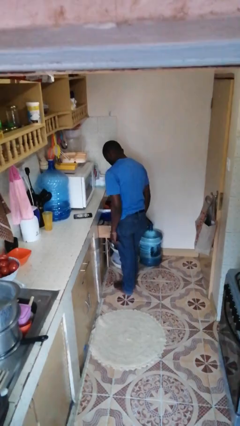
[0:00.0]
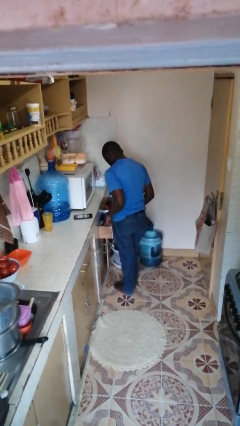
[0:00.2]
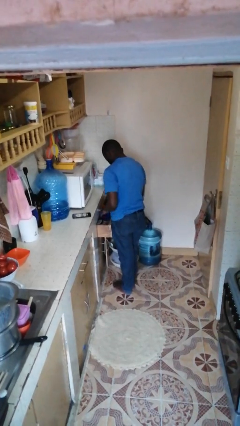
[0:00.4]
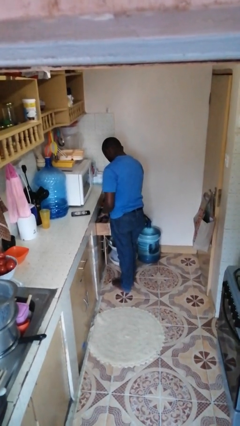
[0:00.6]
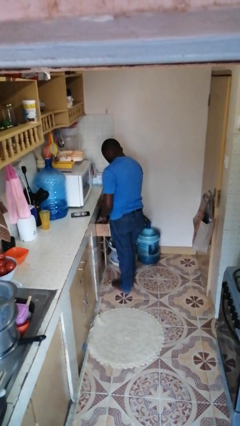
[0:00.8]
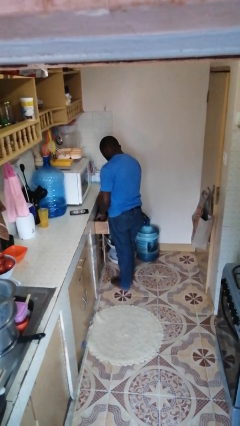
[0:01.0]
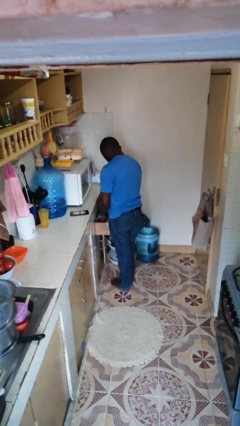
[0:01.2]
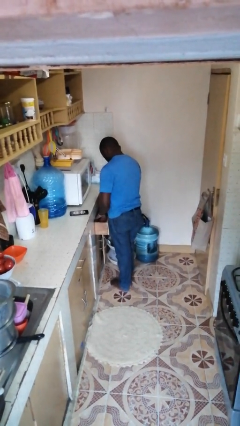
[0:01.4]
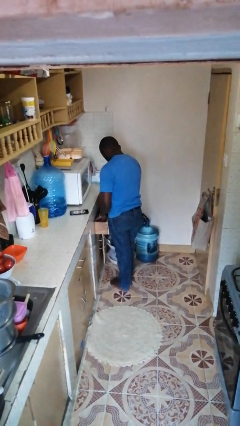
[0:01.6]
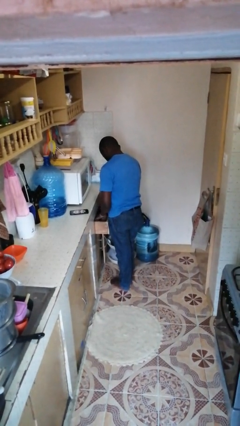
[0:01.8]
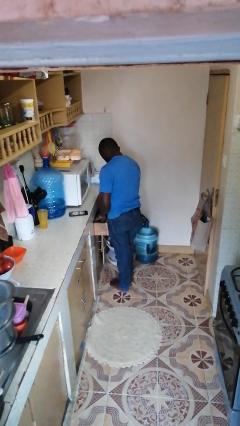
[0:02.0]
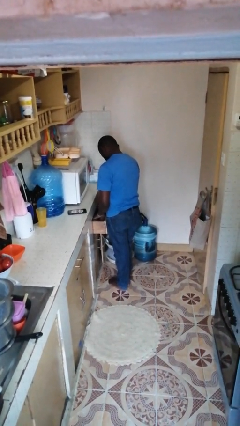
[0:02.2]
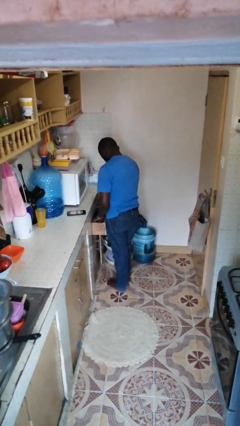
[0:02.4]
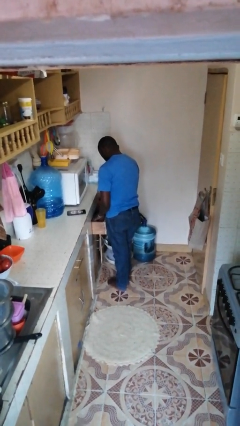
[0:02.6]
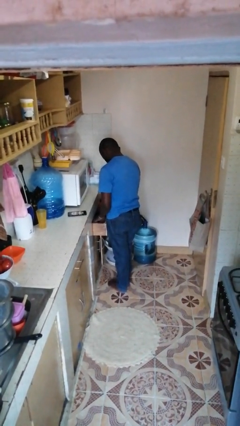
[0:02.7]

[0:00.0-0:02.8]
person searches in kitchen drawer

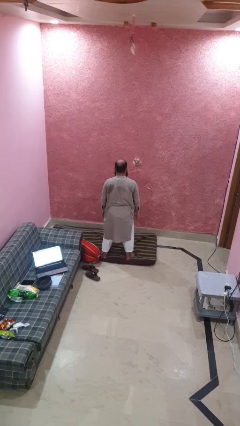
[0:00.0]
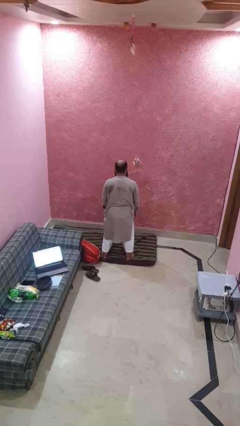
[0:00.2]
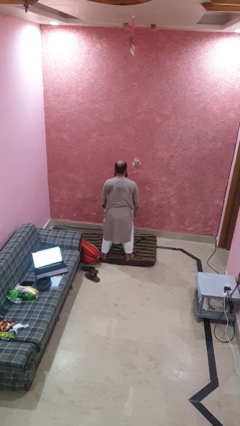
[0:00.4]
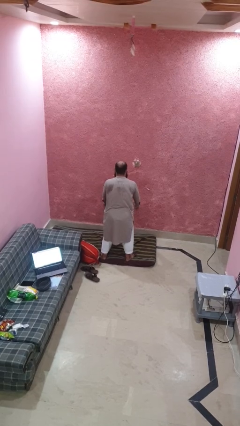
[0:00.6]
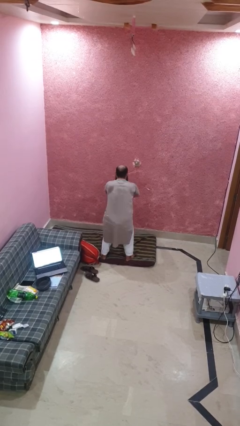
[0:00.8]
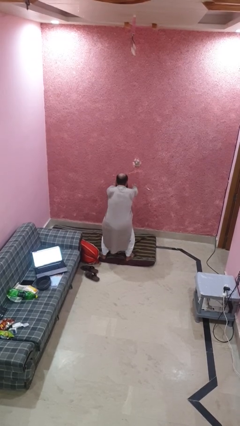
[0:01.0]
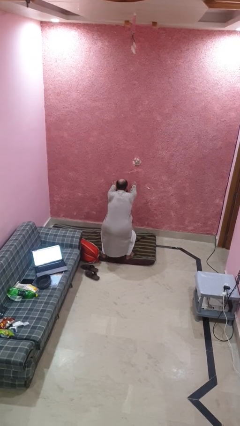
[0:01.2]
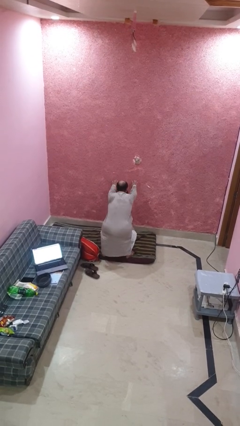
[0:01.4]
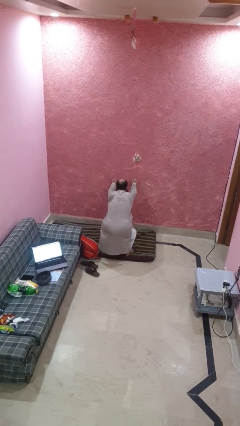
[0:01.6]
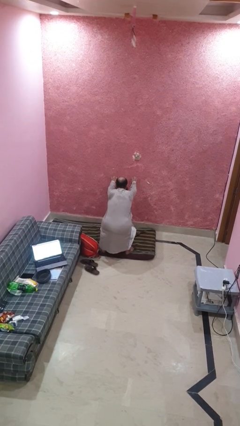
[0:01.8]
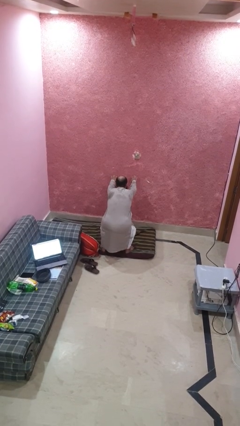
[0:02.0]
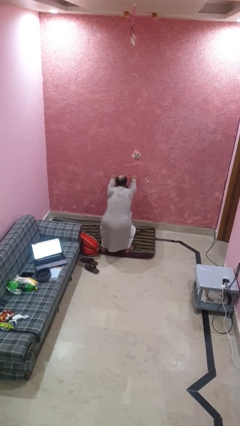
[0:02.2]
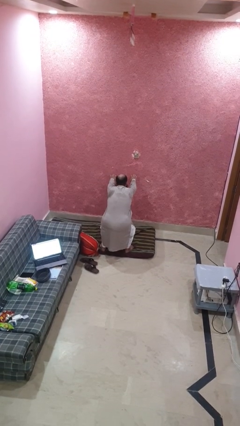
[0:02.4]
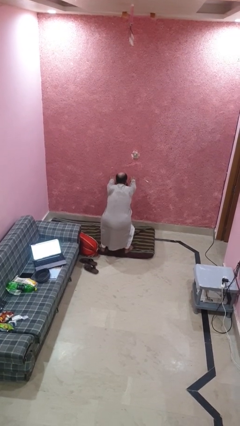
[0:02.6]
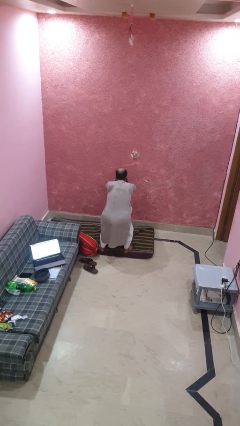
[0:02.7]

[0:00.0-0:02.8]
person squats

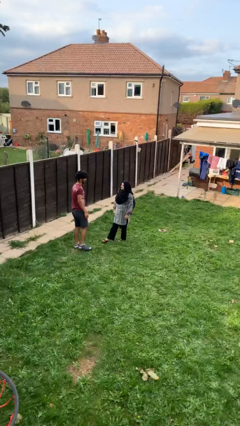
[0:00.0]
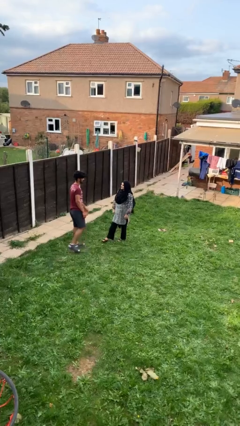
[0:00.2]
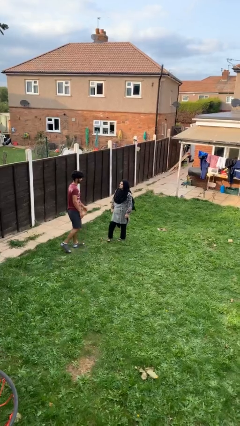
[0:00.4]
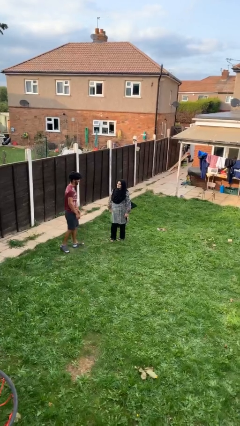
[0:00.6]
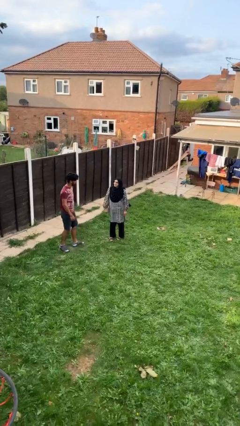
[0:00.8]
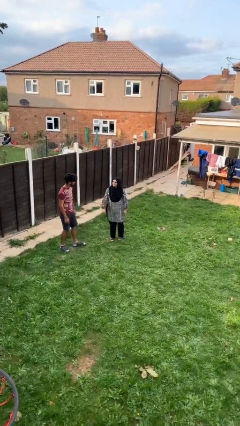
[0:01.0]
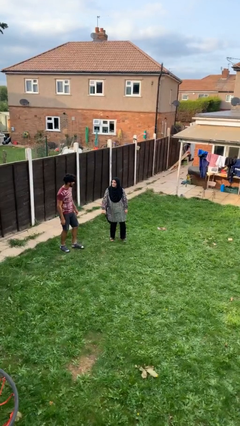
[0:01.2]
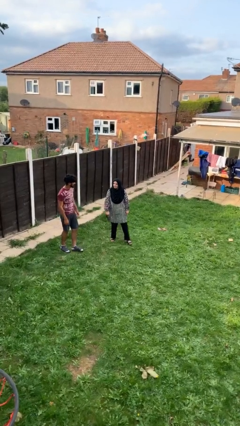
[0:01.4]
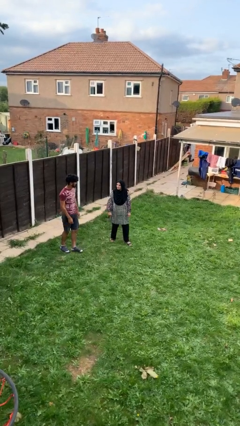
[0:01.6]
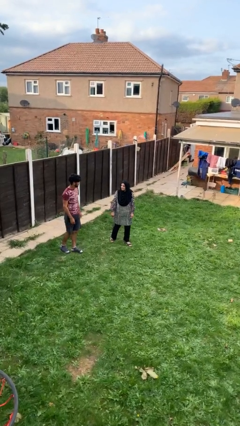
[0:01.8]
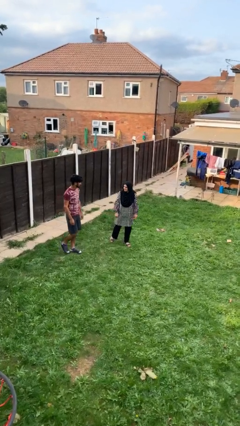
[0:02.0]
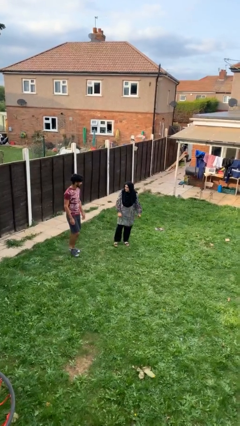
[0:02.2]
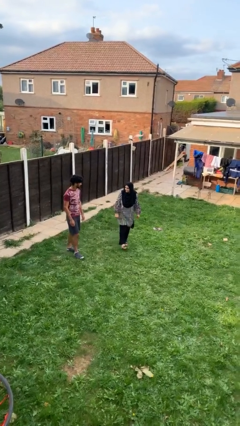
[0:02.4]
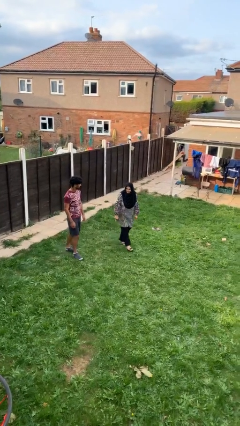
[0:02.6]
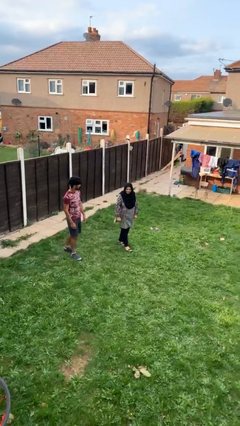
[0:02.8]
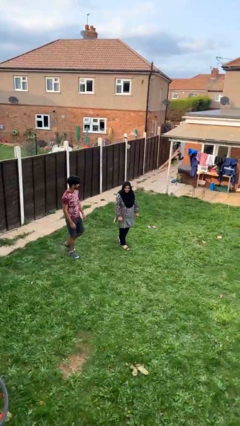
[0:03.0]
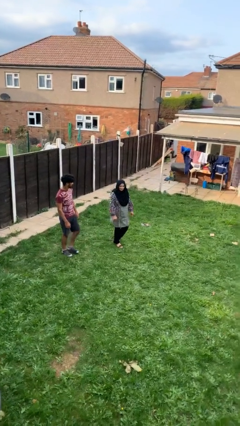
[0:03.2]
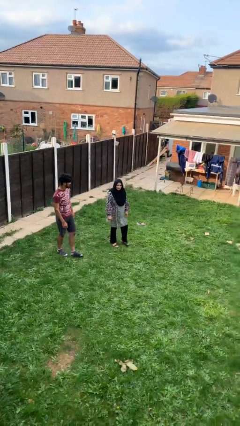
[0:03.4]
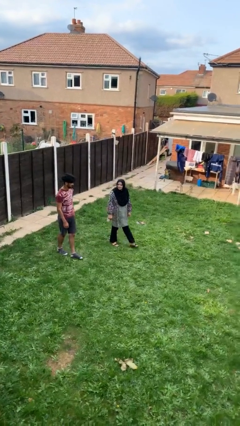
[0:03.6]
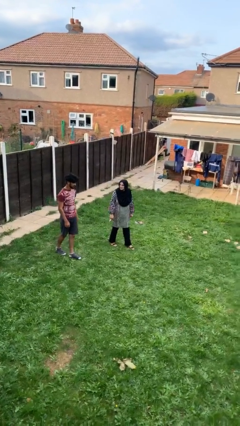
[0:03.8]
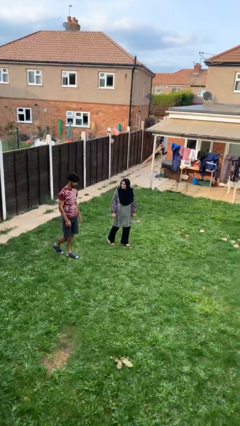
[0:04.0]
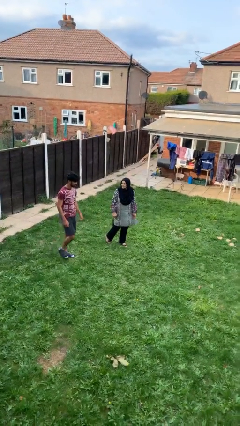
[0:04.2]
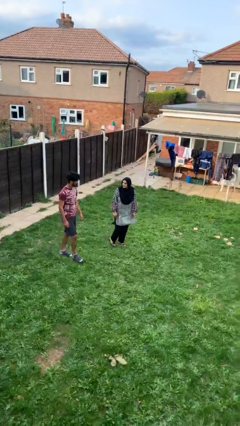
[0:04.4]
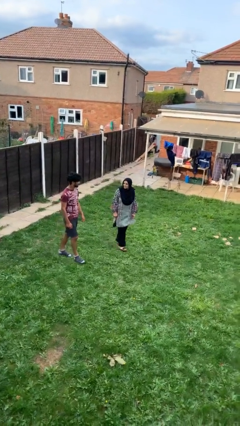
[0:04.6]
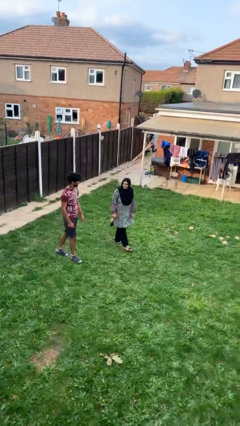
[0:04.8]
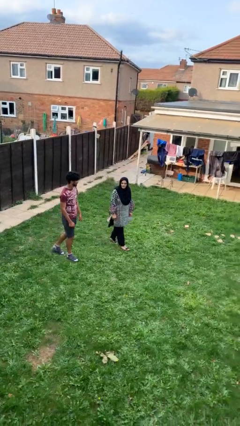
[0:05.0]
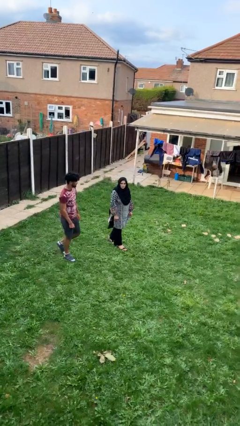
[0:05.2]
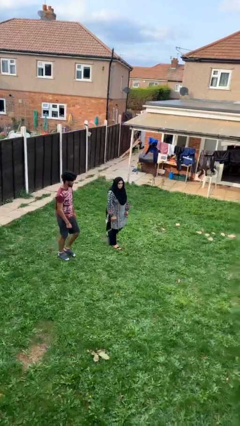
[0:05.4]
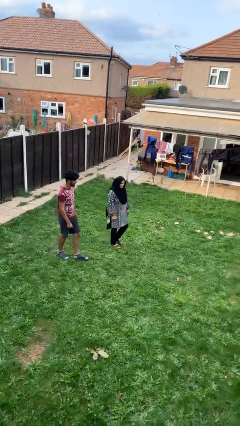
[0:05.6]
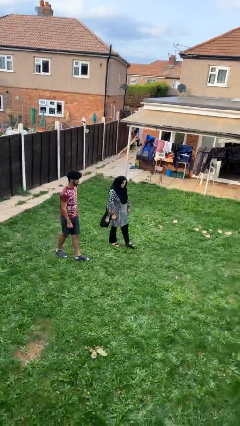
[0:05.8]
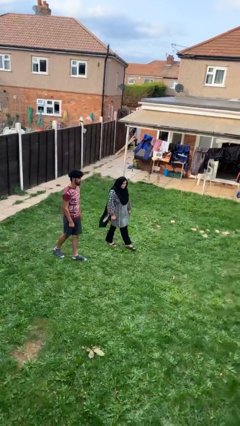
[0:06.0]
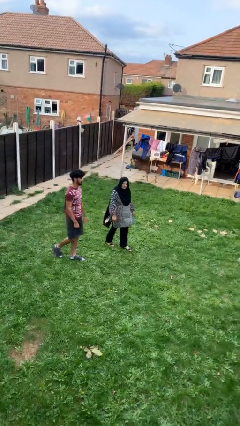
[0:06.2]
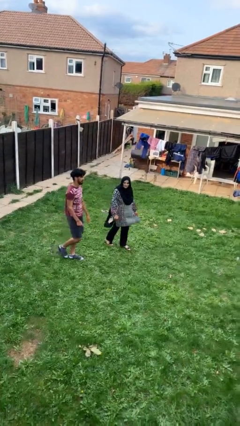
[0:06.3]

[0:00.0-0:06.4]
person talks to person

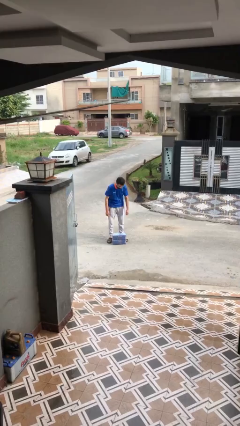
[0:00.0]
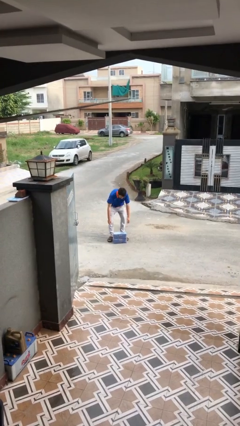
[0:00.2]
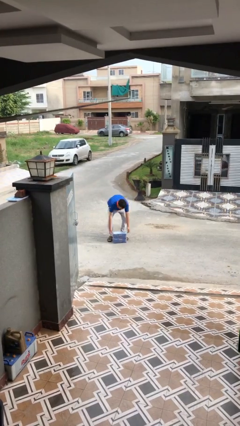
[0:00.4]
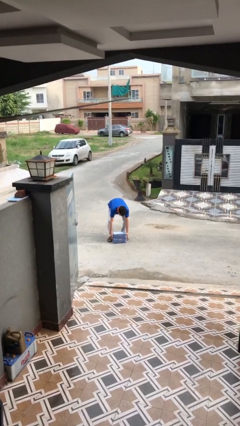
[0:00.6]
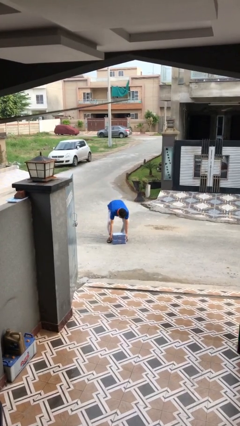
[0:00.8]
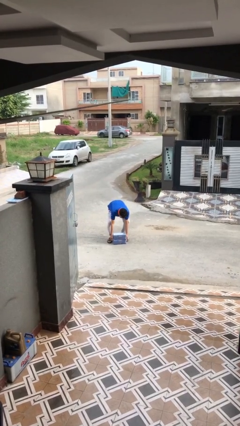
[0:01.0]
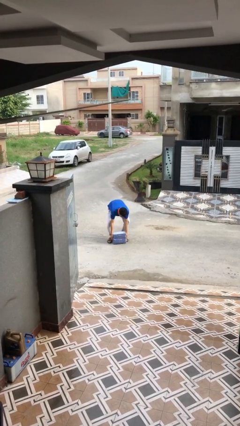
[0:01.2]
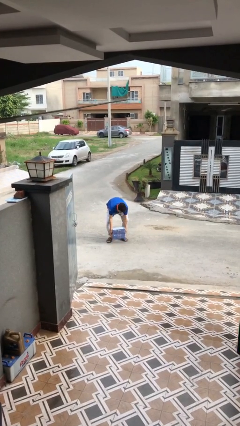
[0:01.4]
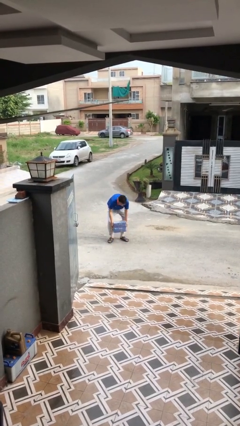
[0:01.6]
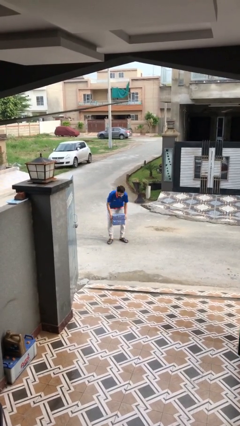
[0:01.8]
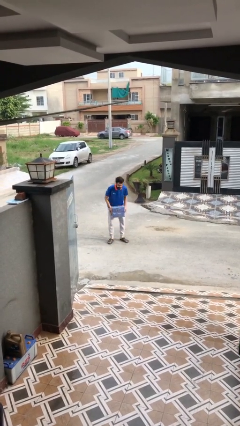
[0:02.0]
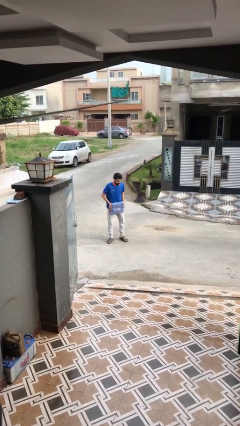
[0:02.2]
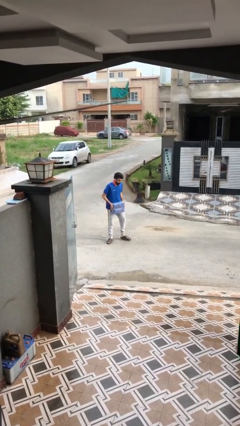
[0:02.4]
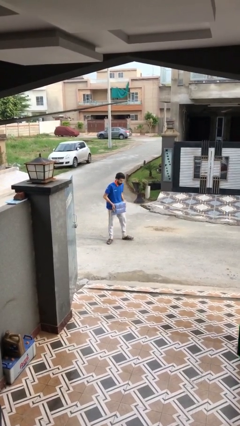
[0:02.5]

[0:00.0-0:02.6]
person picks up object from floor

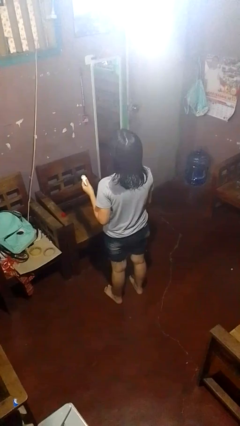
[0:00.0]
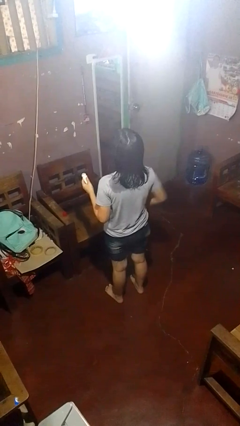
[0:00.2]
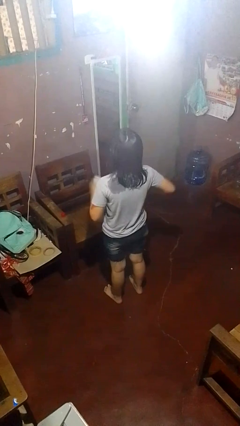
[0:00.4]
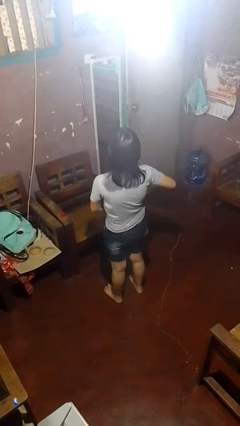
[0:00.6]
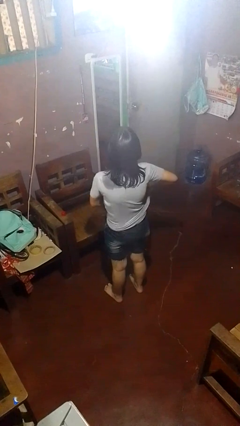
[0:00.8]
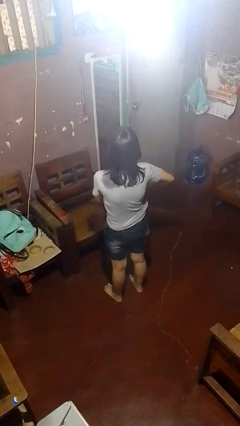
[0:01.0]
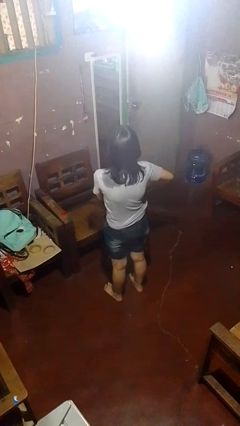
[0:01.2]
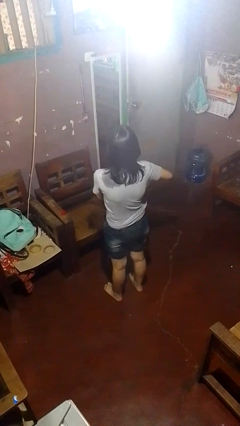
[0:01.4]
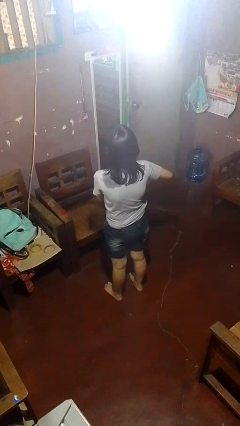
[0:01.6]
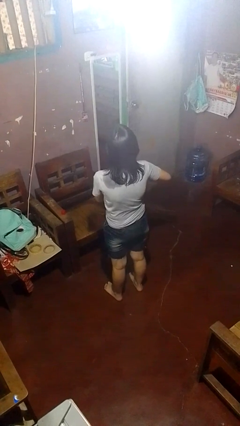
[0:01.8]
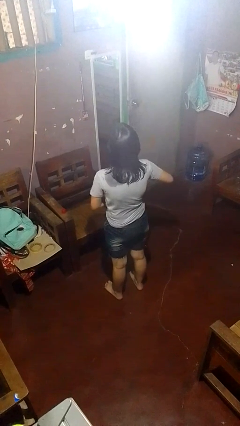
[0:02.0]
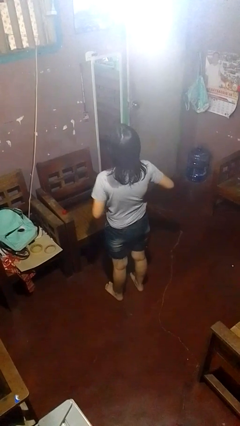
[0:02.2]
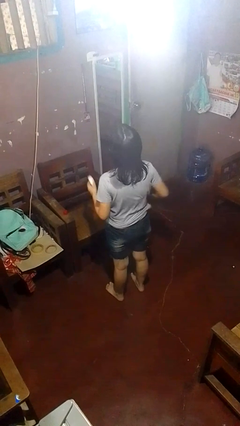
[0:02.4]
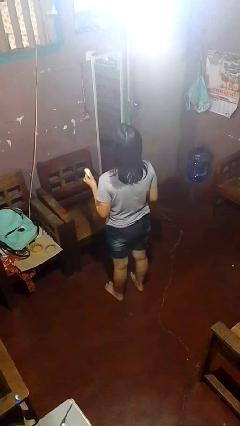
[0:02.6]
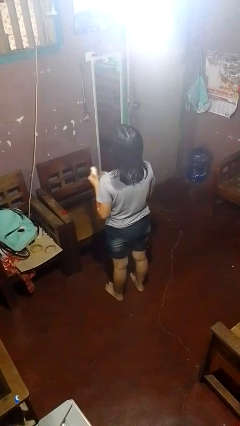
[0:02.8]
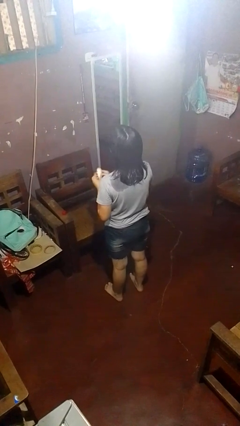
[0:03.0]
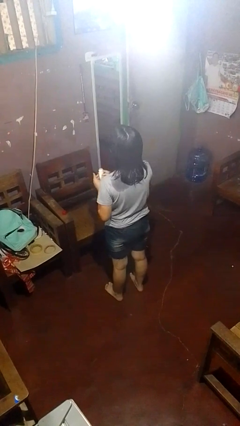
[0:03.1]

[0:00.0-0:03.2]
person applies deodorant
